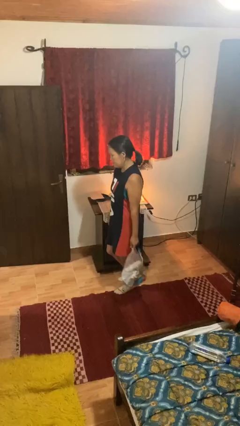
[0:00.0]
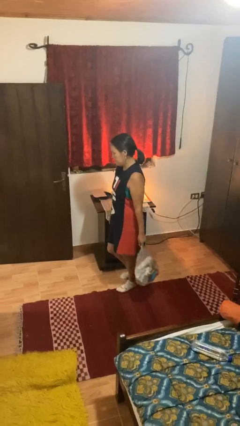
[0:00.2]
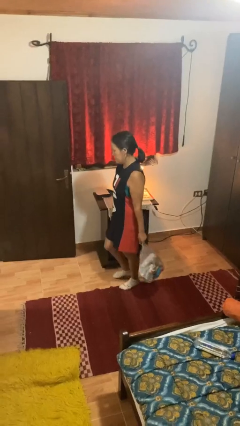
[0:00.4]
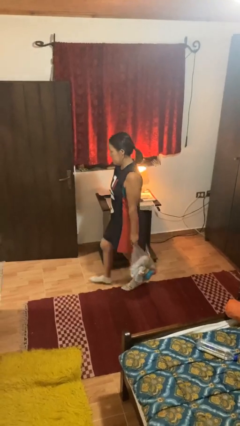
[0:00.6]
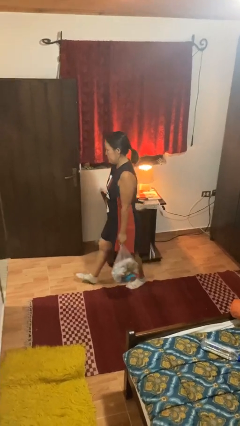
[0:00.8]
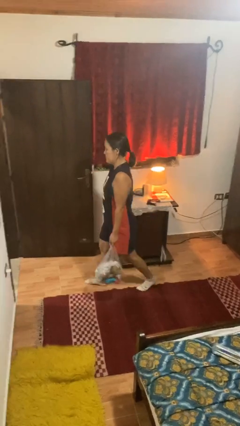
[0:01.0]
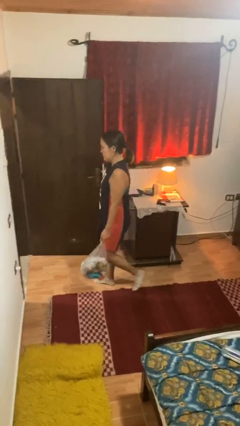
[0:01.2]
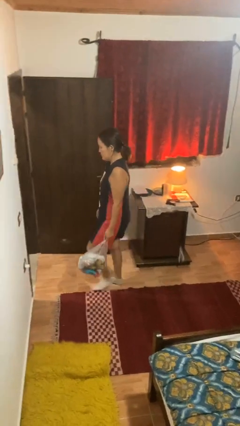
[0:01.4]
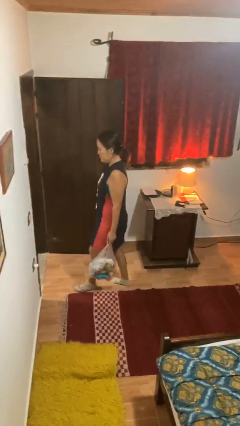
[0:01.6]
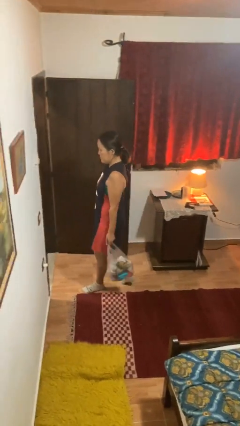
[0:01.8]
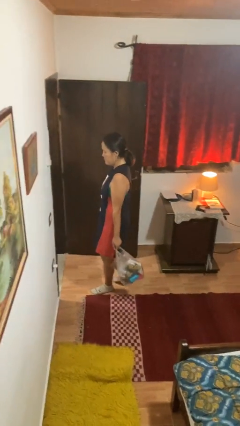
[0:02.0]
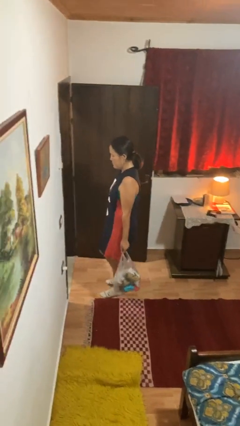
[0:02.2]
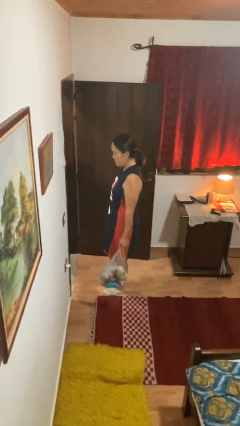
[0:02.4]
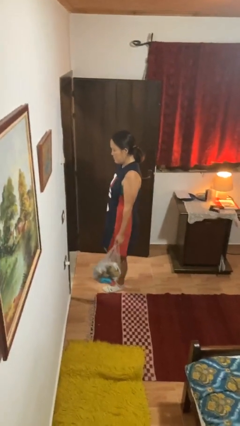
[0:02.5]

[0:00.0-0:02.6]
person carries groceries

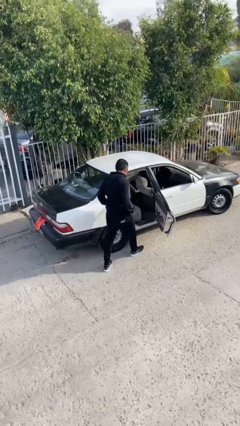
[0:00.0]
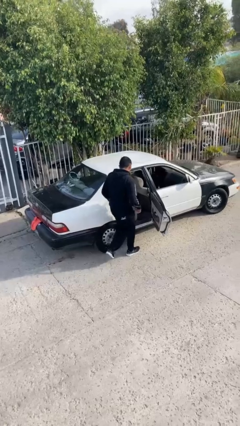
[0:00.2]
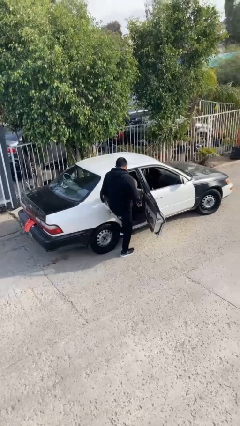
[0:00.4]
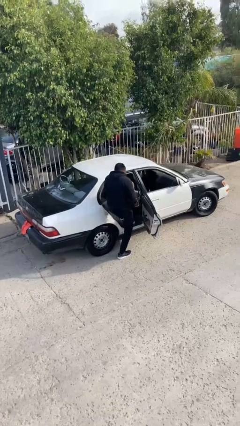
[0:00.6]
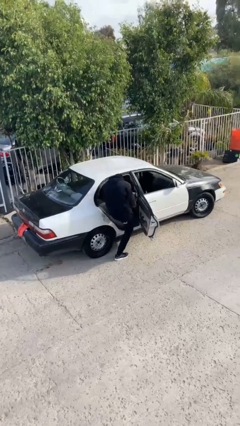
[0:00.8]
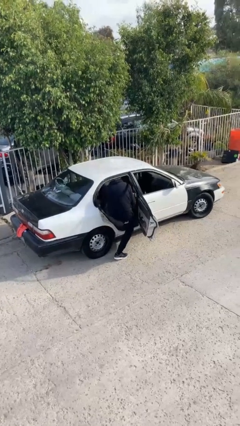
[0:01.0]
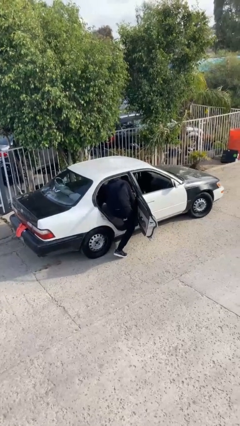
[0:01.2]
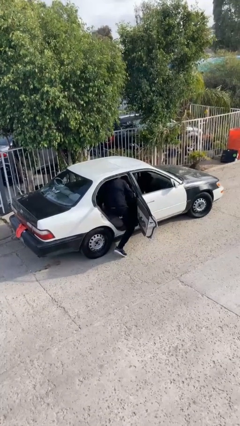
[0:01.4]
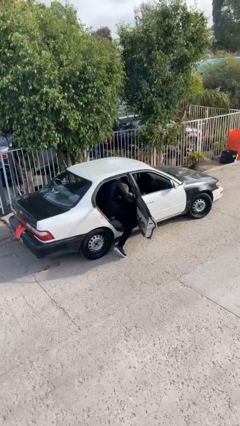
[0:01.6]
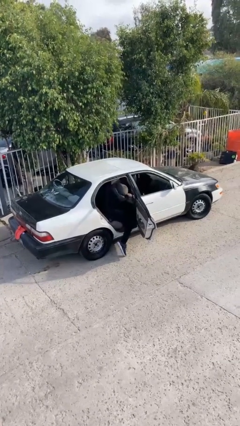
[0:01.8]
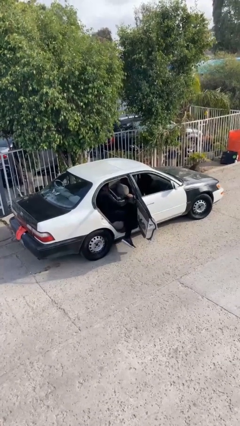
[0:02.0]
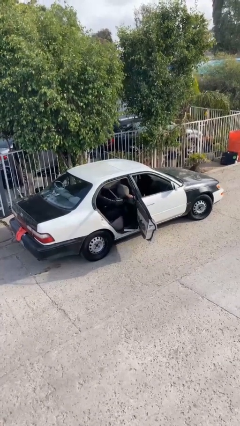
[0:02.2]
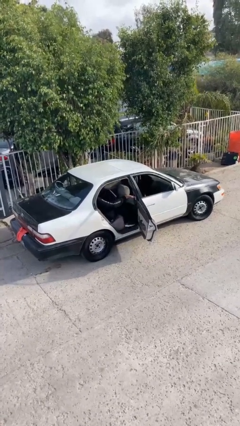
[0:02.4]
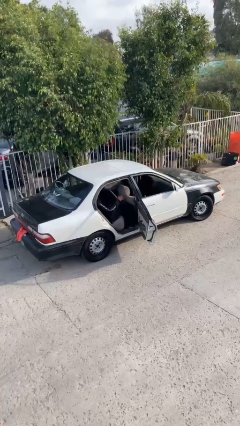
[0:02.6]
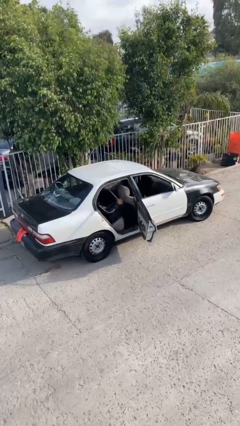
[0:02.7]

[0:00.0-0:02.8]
person enters car

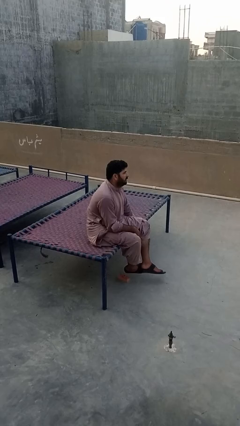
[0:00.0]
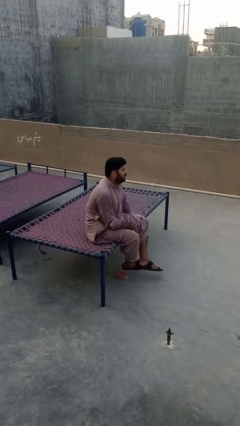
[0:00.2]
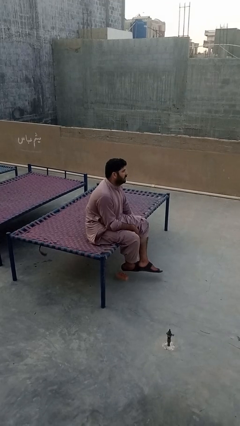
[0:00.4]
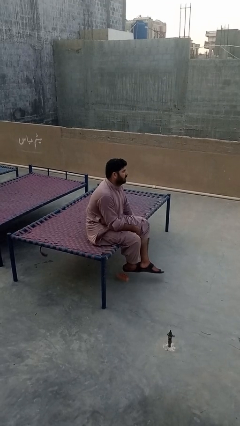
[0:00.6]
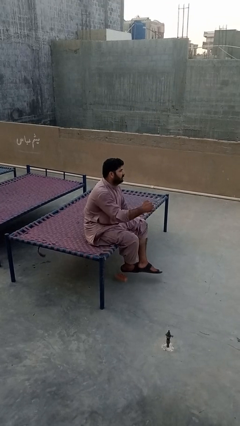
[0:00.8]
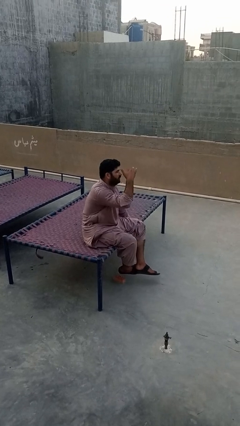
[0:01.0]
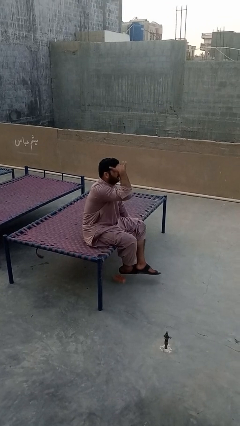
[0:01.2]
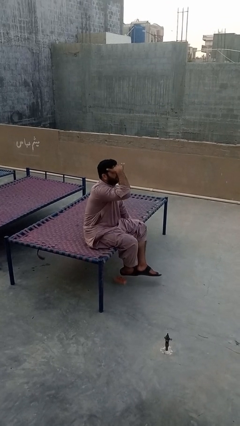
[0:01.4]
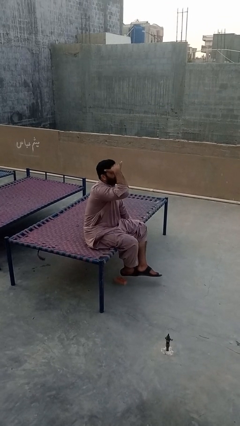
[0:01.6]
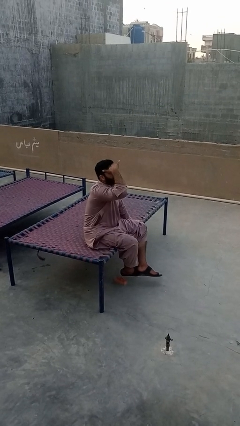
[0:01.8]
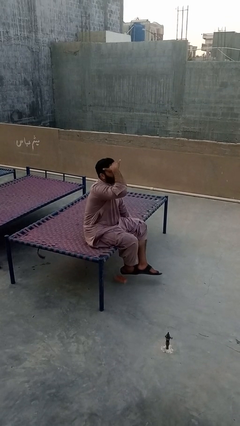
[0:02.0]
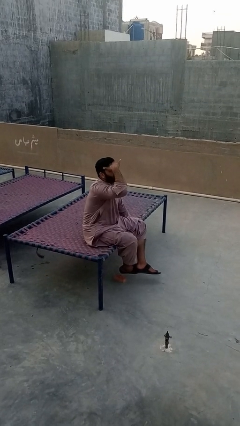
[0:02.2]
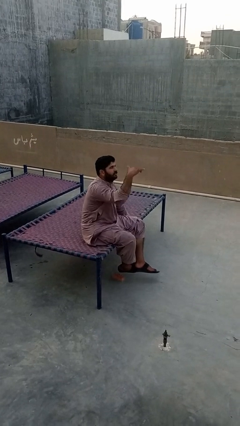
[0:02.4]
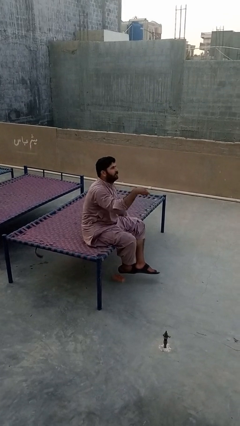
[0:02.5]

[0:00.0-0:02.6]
person shades eyes

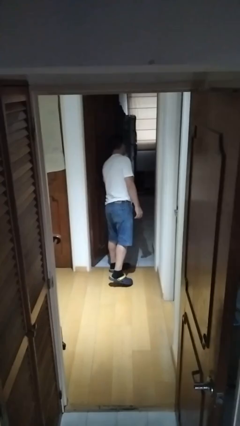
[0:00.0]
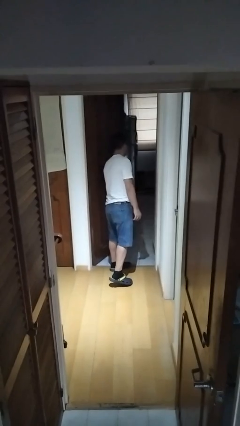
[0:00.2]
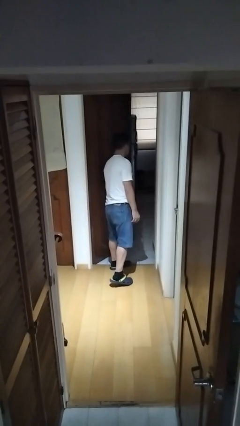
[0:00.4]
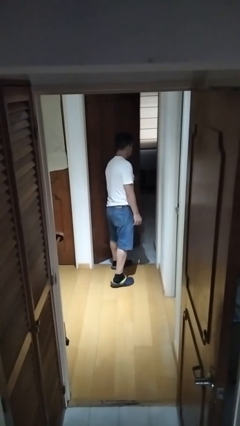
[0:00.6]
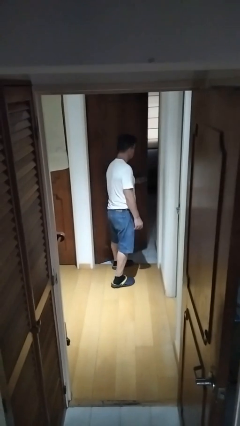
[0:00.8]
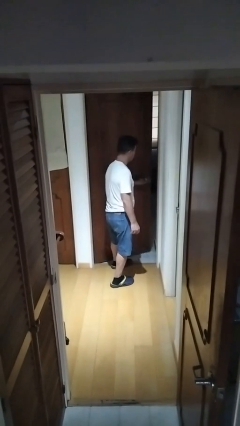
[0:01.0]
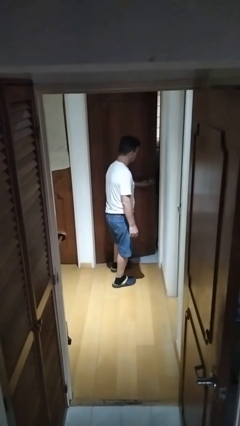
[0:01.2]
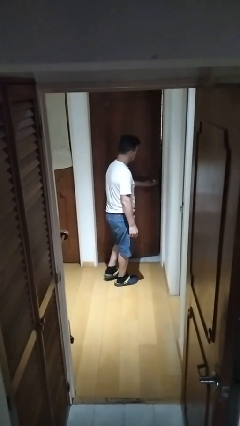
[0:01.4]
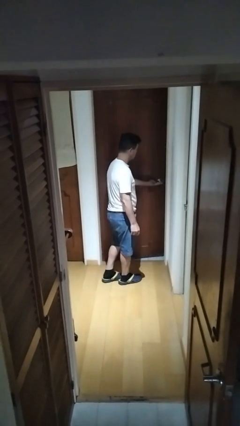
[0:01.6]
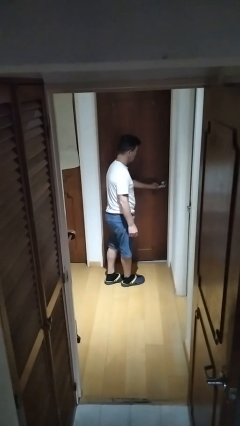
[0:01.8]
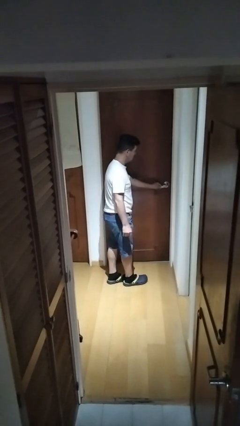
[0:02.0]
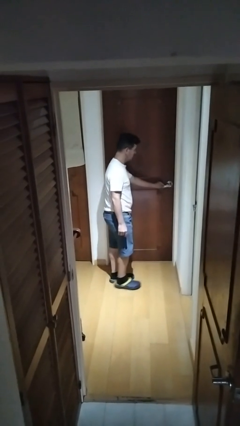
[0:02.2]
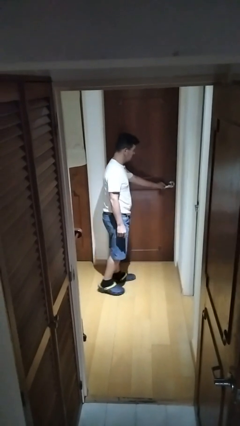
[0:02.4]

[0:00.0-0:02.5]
person closes facility door

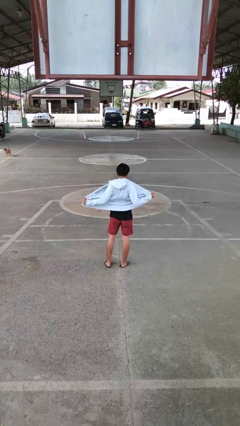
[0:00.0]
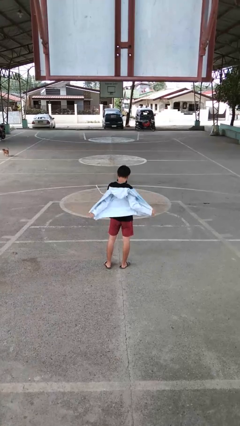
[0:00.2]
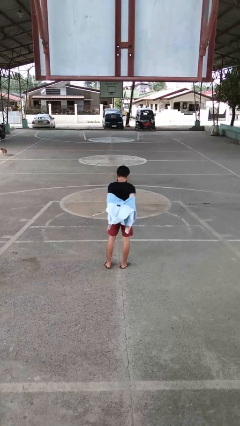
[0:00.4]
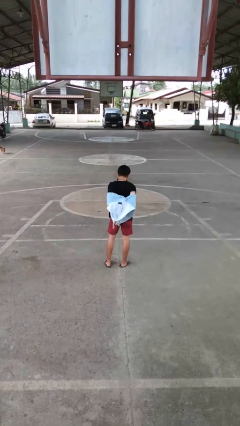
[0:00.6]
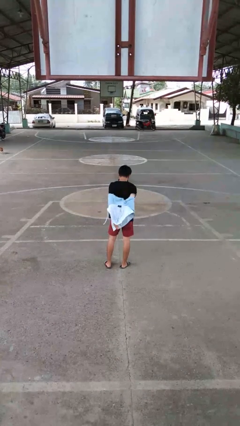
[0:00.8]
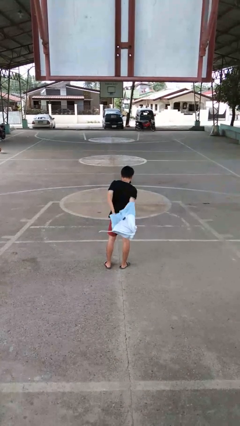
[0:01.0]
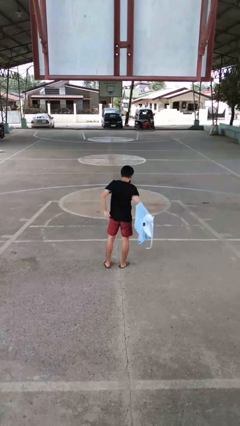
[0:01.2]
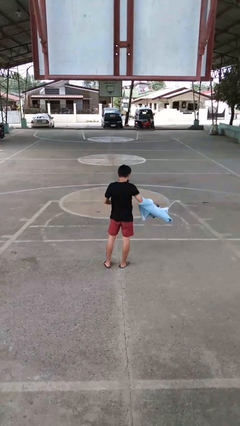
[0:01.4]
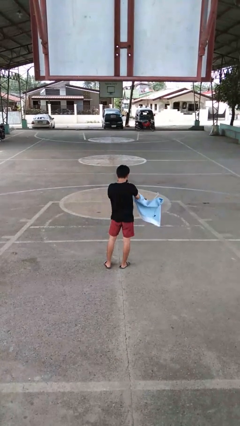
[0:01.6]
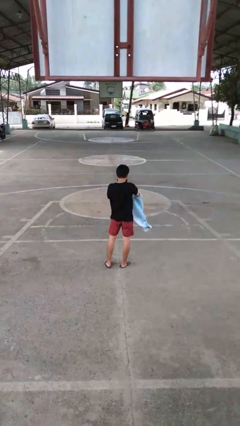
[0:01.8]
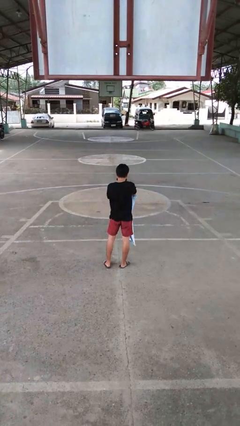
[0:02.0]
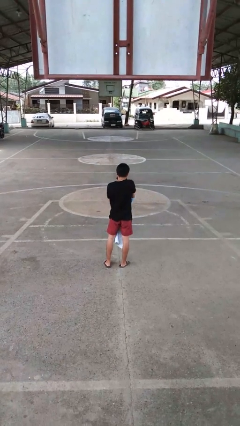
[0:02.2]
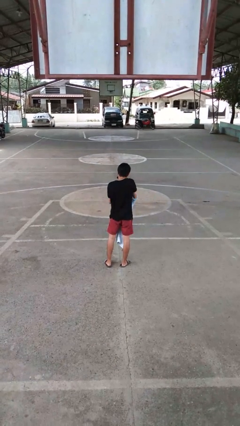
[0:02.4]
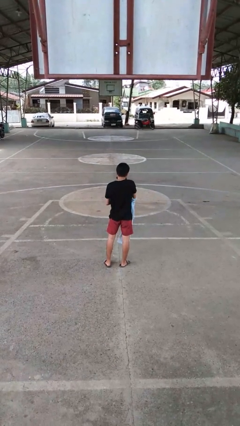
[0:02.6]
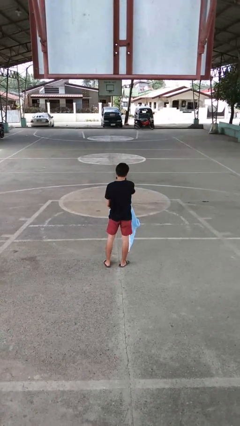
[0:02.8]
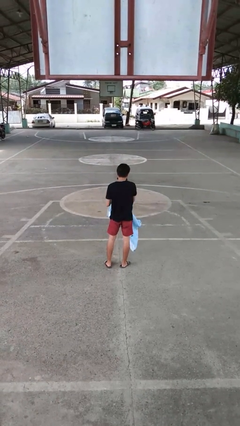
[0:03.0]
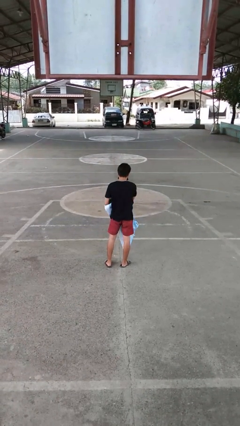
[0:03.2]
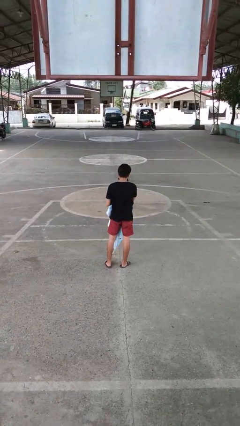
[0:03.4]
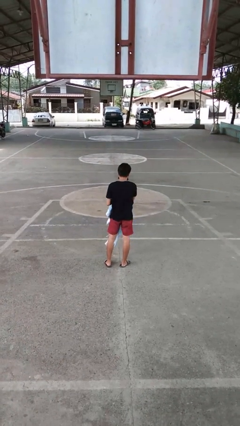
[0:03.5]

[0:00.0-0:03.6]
person takes off jacket

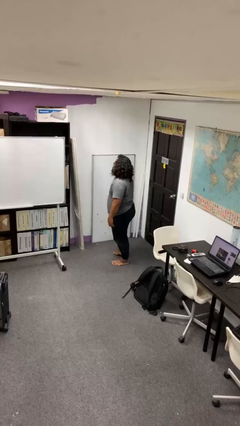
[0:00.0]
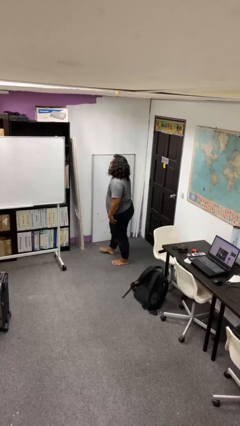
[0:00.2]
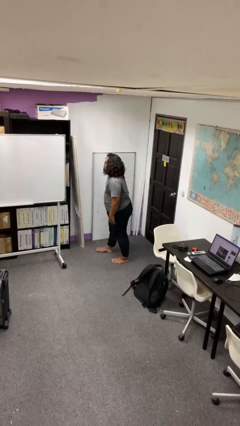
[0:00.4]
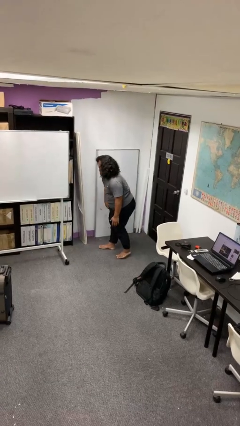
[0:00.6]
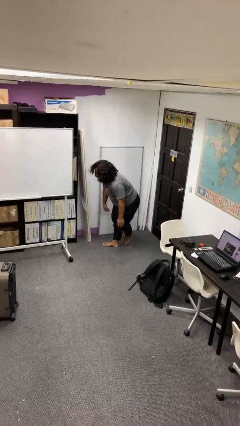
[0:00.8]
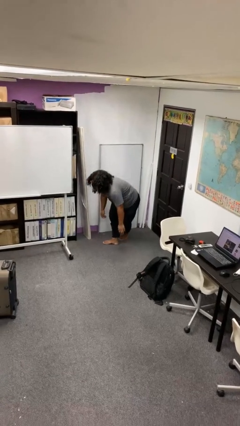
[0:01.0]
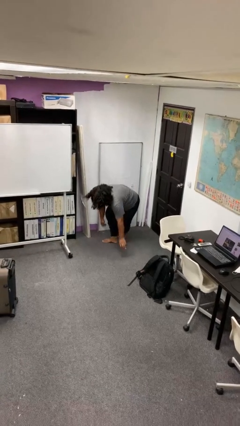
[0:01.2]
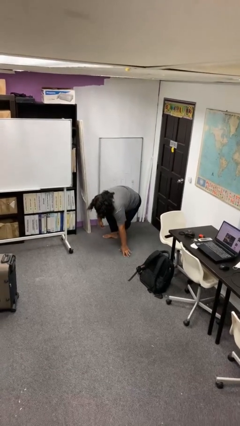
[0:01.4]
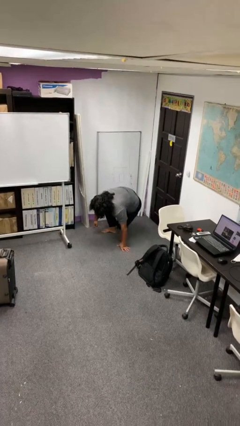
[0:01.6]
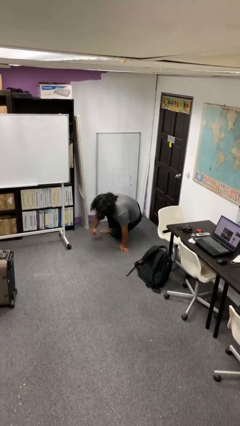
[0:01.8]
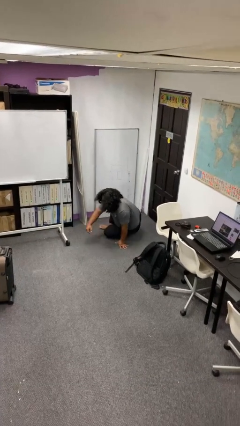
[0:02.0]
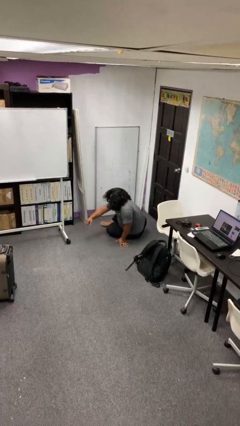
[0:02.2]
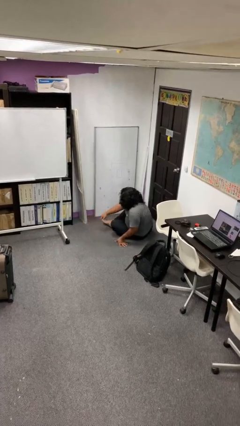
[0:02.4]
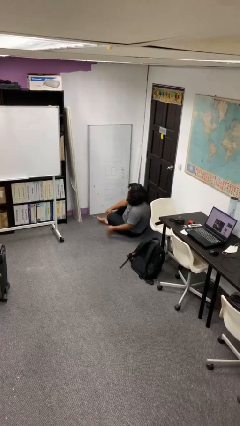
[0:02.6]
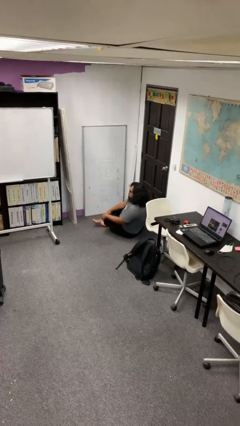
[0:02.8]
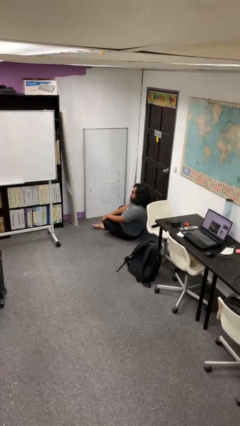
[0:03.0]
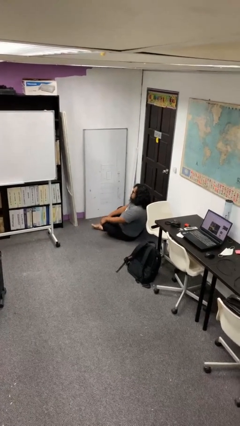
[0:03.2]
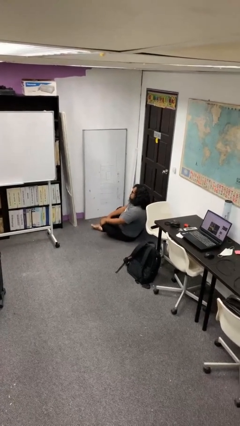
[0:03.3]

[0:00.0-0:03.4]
person sits crisscross
